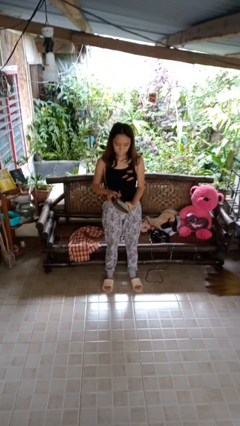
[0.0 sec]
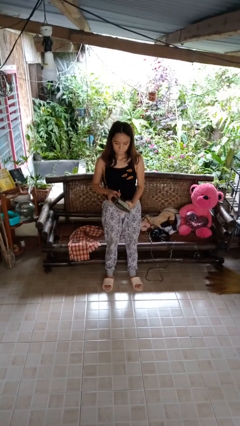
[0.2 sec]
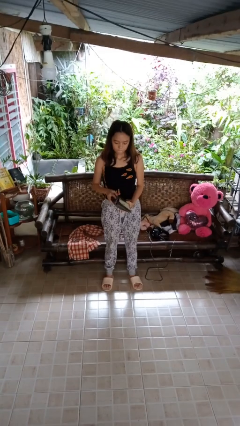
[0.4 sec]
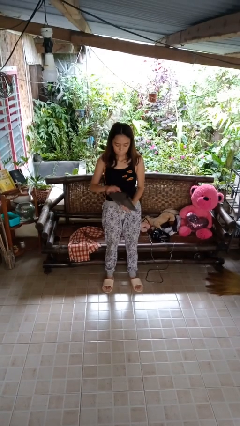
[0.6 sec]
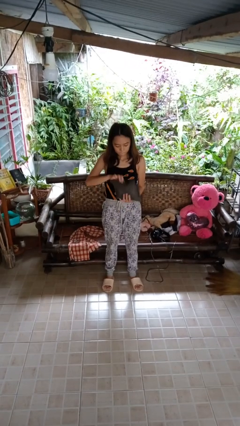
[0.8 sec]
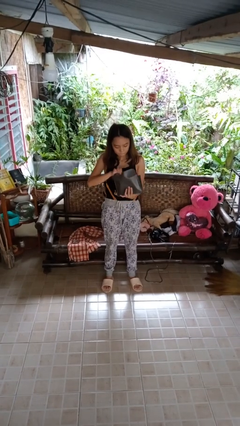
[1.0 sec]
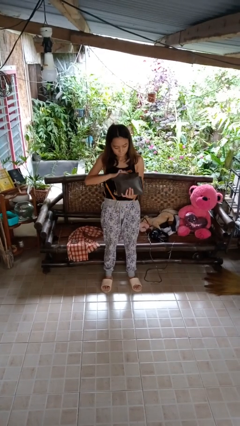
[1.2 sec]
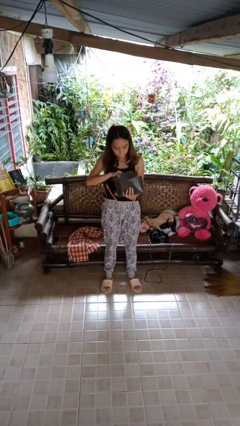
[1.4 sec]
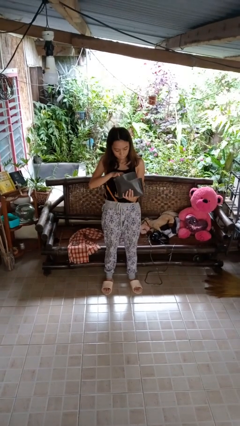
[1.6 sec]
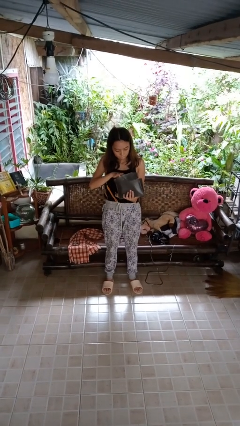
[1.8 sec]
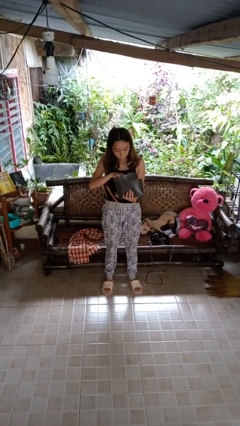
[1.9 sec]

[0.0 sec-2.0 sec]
person searches in purse

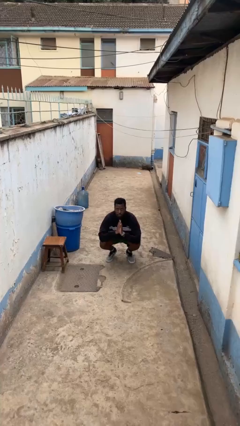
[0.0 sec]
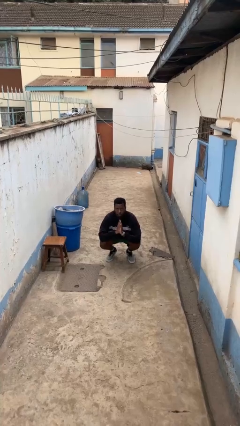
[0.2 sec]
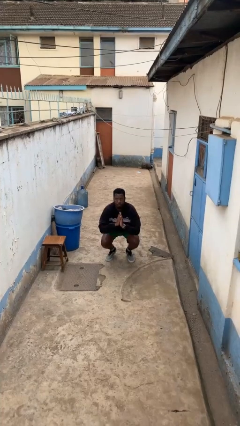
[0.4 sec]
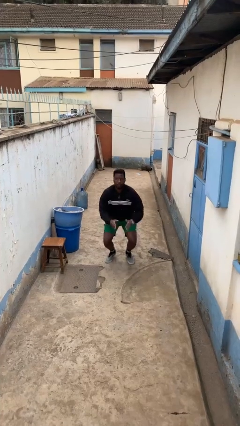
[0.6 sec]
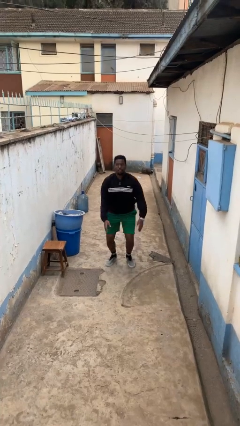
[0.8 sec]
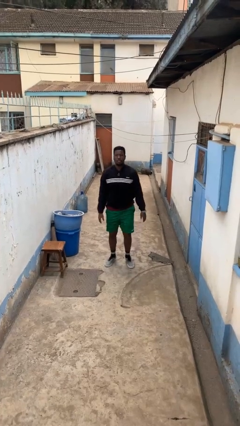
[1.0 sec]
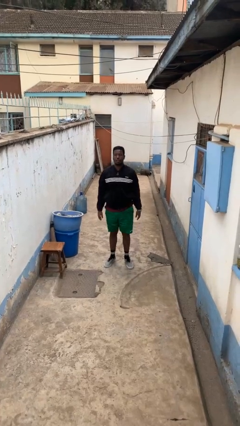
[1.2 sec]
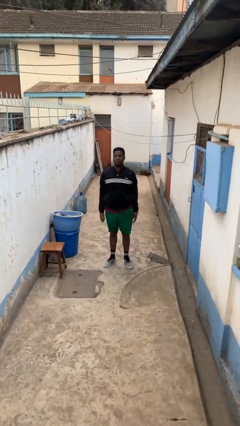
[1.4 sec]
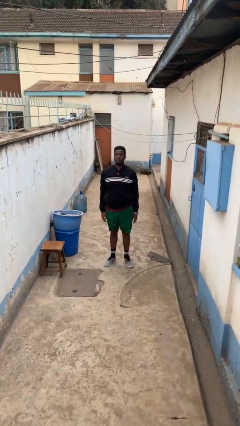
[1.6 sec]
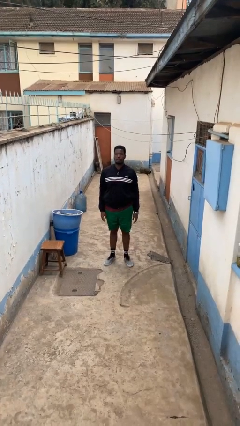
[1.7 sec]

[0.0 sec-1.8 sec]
person stands up

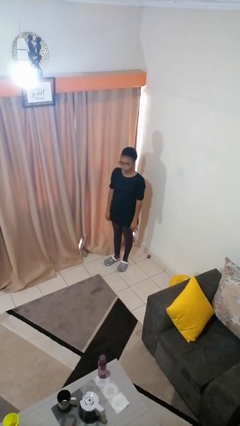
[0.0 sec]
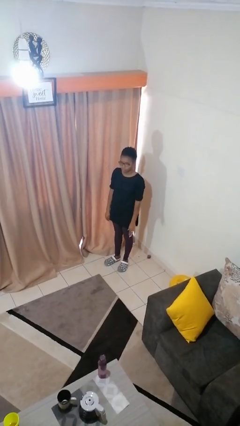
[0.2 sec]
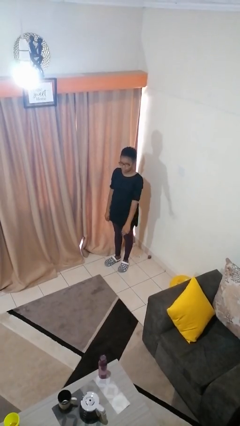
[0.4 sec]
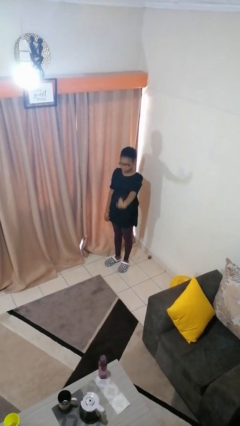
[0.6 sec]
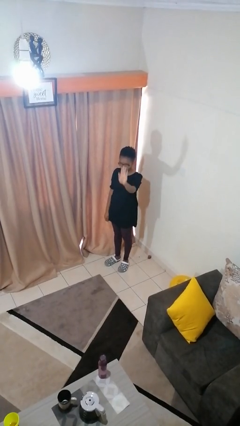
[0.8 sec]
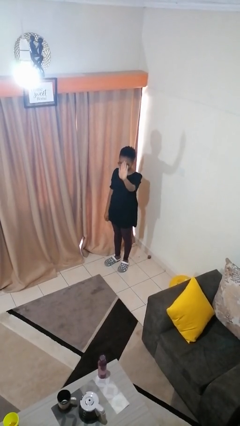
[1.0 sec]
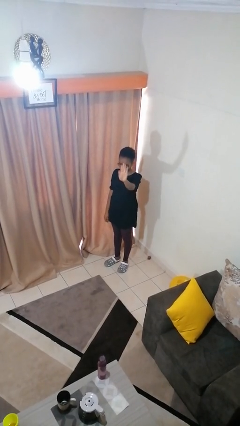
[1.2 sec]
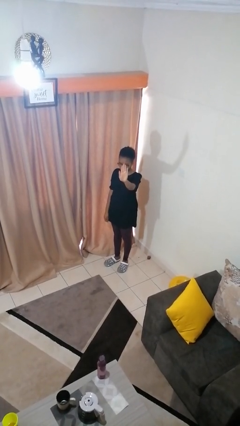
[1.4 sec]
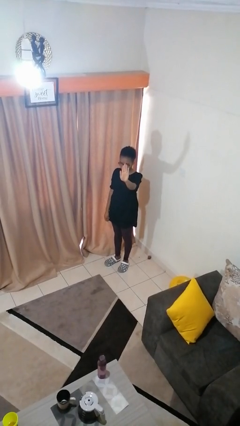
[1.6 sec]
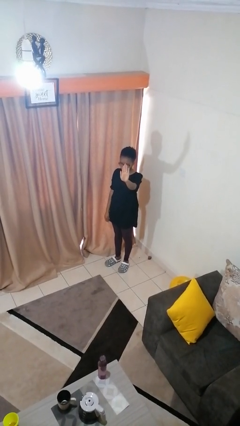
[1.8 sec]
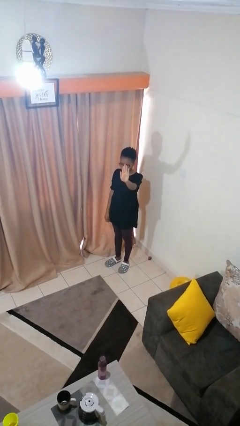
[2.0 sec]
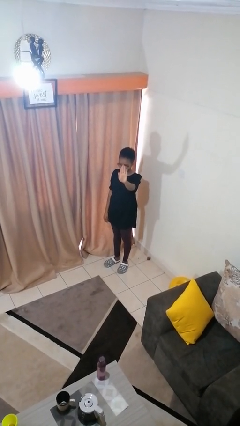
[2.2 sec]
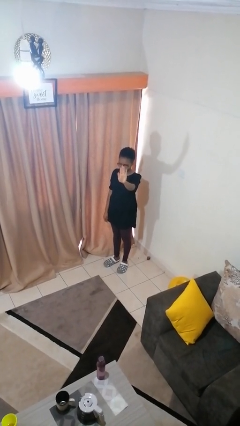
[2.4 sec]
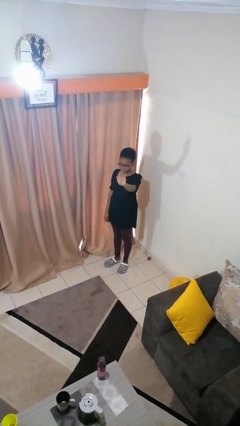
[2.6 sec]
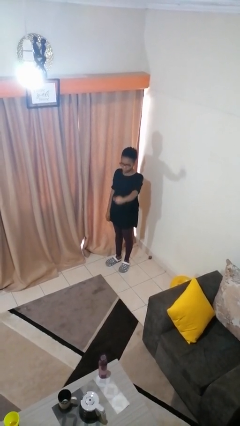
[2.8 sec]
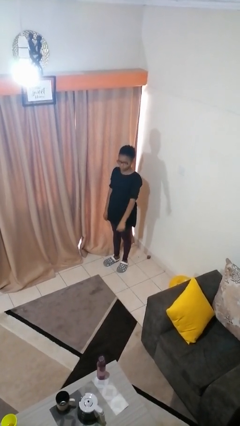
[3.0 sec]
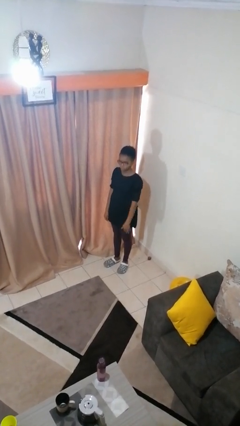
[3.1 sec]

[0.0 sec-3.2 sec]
person gestures stop

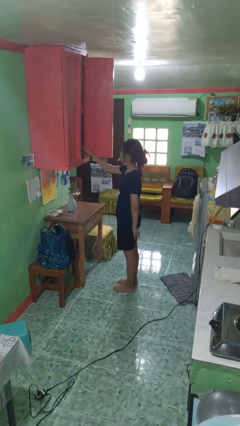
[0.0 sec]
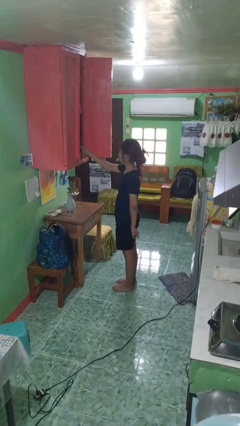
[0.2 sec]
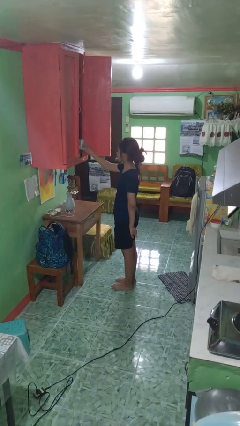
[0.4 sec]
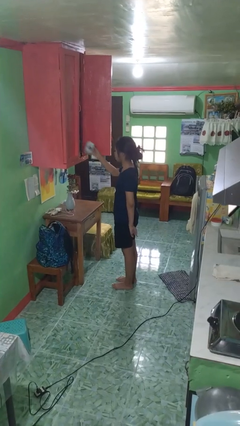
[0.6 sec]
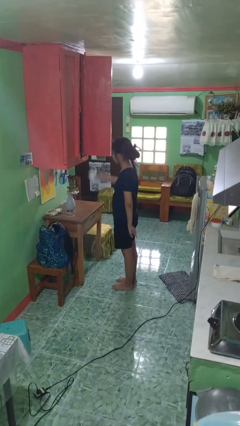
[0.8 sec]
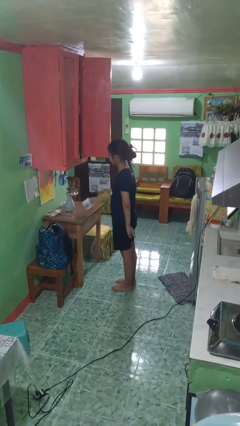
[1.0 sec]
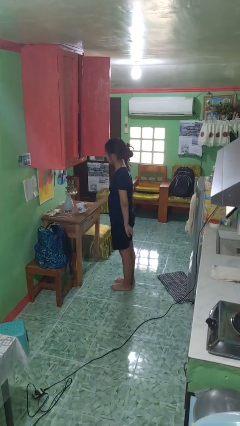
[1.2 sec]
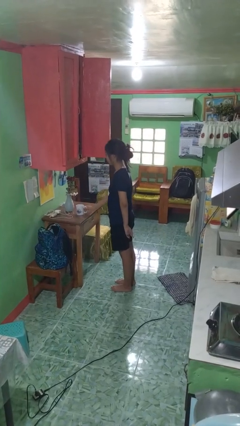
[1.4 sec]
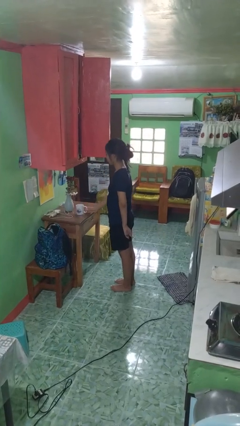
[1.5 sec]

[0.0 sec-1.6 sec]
person takes object from cabinet

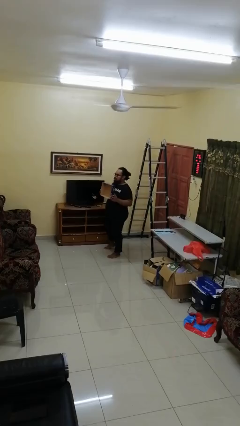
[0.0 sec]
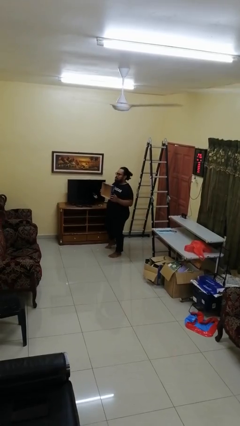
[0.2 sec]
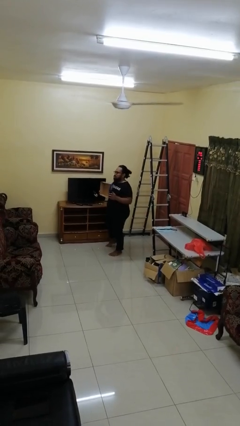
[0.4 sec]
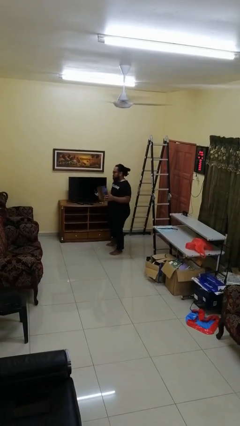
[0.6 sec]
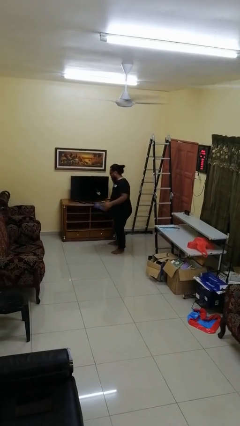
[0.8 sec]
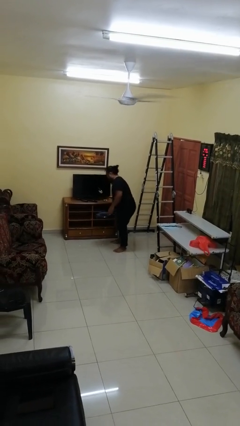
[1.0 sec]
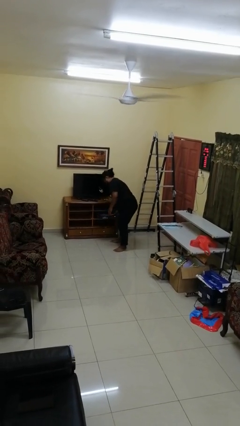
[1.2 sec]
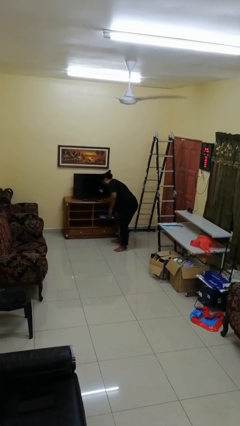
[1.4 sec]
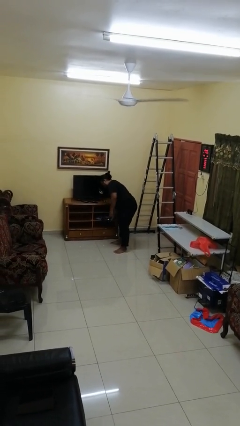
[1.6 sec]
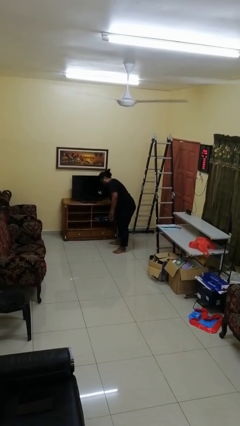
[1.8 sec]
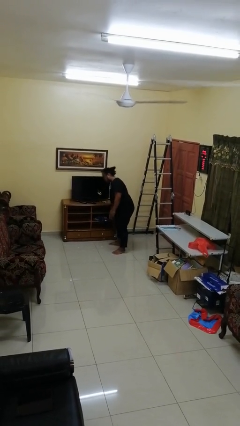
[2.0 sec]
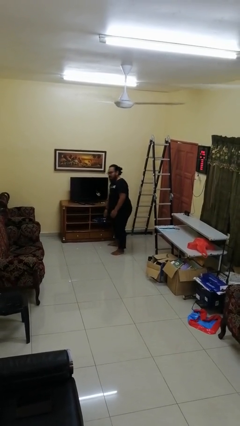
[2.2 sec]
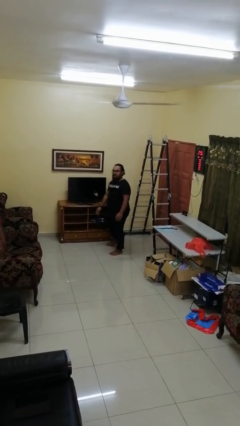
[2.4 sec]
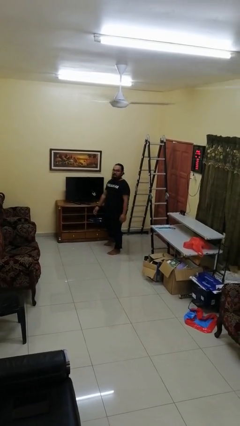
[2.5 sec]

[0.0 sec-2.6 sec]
person puts down object into cabinet

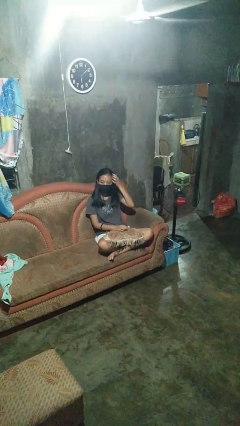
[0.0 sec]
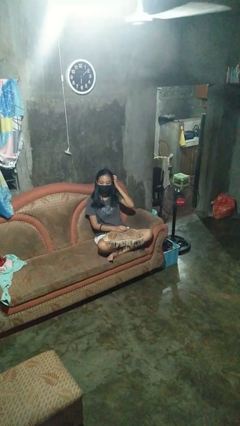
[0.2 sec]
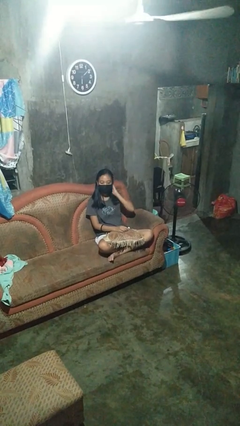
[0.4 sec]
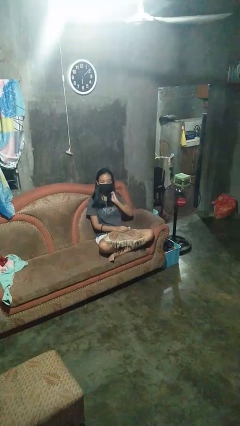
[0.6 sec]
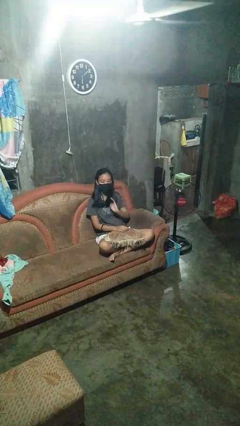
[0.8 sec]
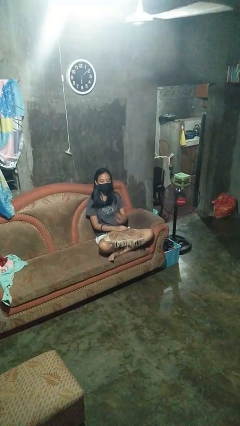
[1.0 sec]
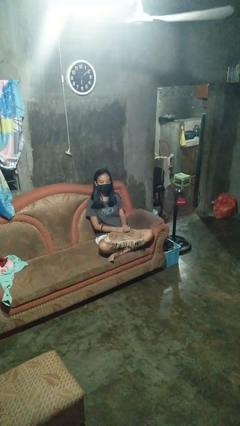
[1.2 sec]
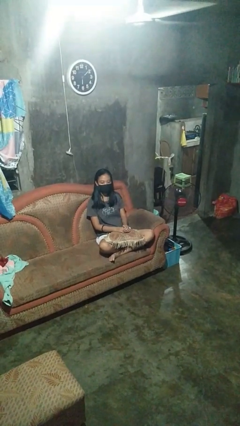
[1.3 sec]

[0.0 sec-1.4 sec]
person strokes hair

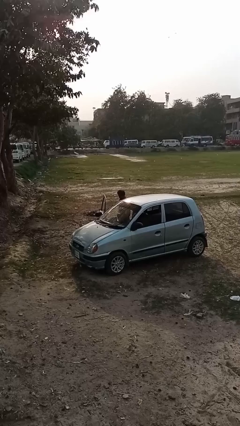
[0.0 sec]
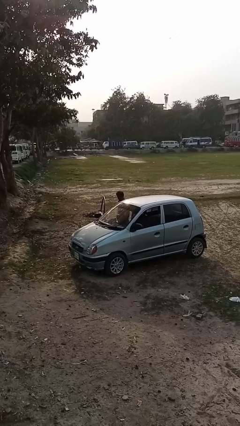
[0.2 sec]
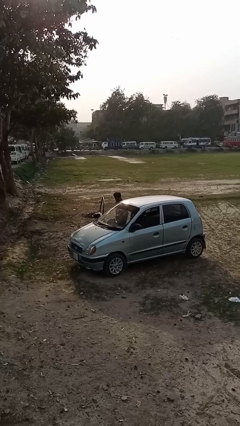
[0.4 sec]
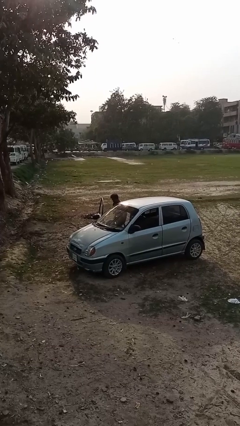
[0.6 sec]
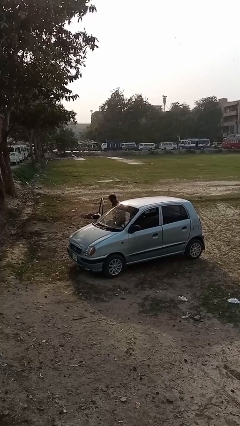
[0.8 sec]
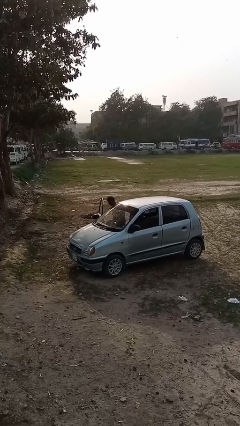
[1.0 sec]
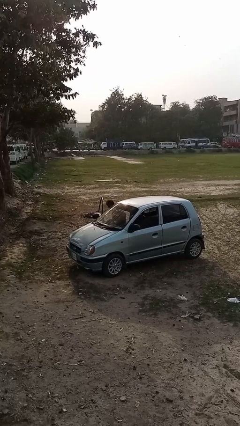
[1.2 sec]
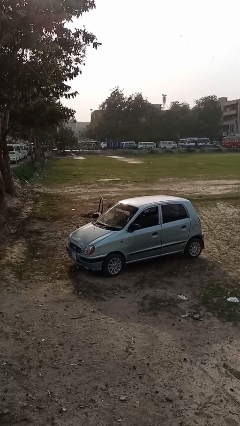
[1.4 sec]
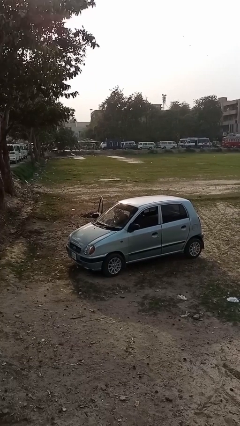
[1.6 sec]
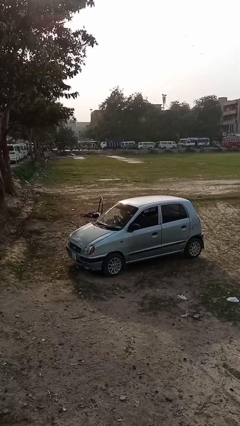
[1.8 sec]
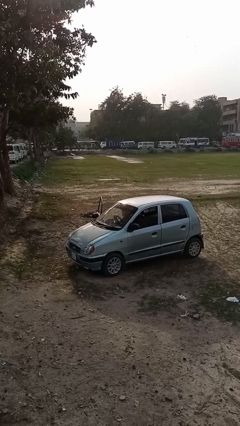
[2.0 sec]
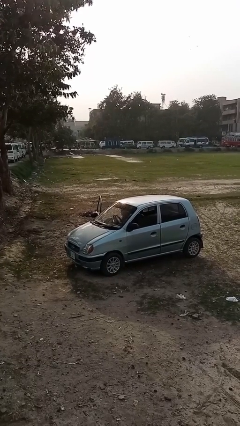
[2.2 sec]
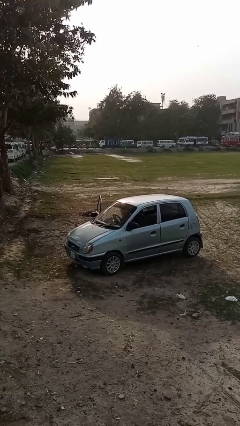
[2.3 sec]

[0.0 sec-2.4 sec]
person enters car

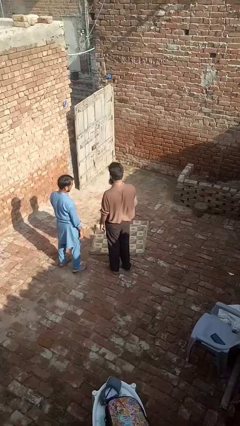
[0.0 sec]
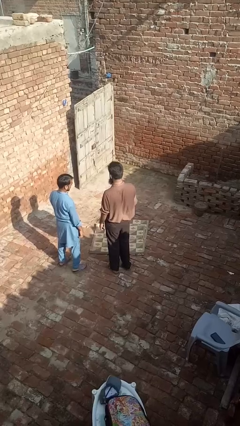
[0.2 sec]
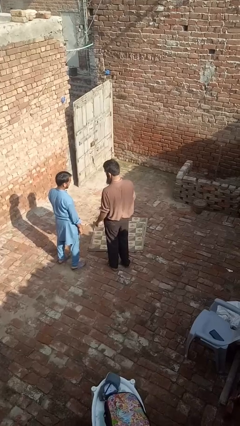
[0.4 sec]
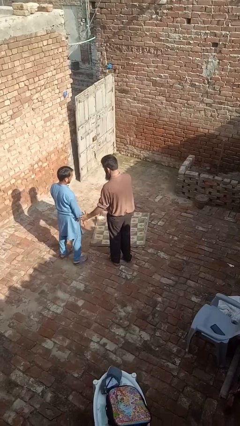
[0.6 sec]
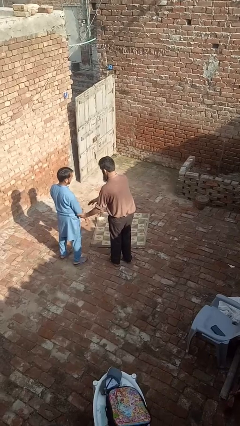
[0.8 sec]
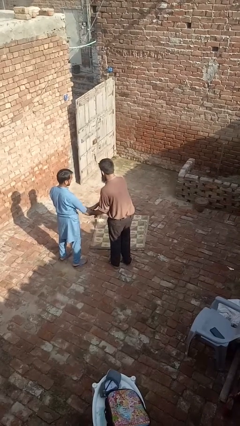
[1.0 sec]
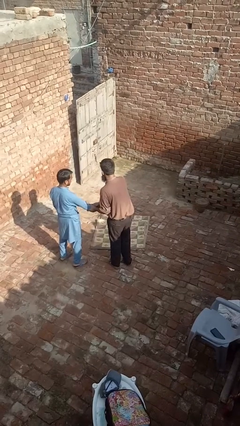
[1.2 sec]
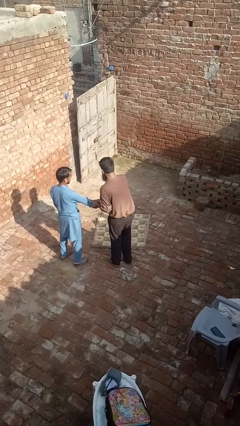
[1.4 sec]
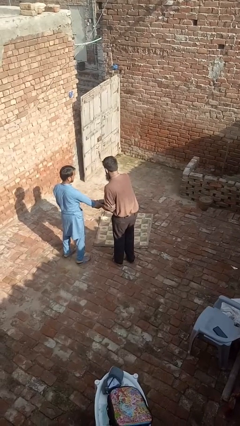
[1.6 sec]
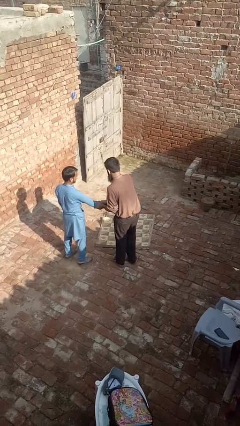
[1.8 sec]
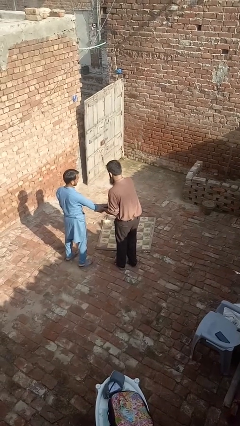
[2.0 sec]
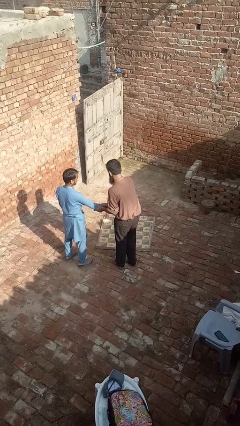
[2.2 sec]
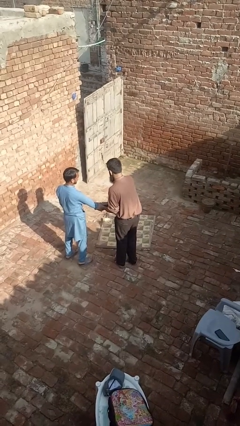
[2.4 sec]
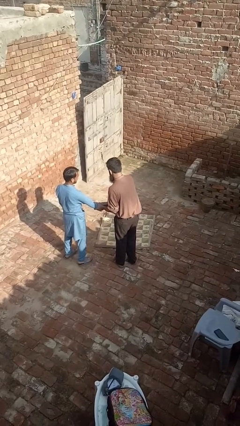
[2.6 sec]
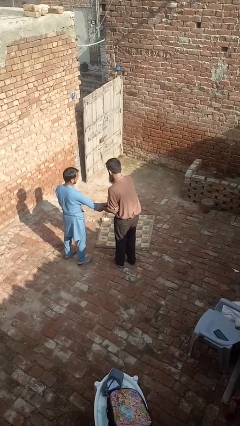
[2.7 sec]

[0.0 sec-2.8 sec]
person grabs person by forearm
